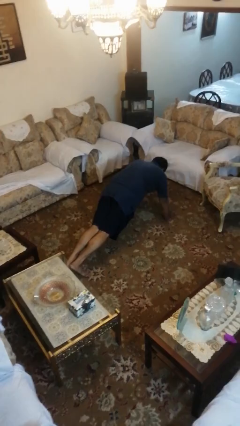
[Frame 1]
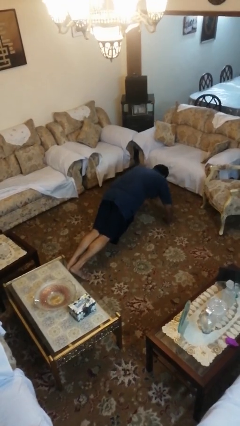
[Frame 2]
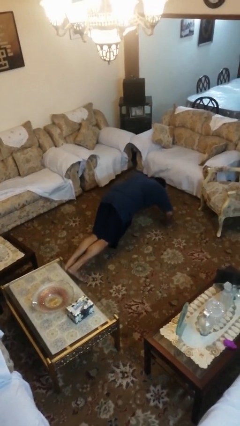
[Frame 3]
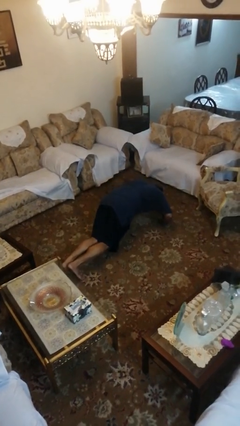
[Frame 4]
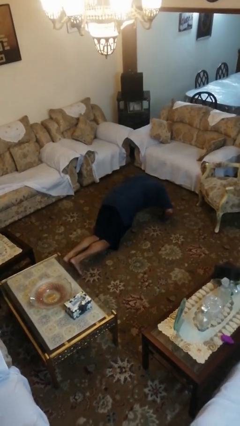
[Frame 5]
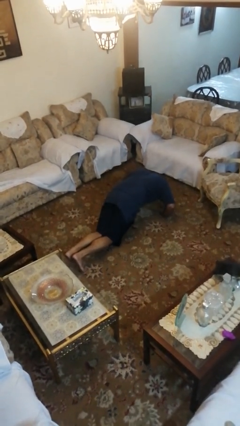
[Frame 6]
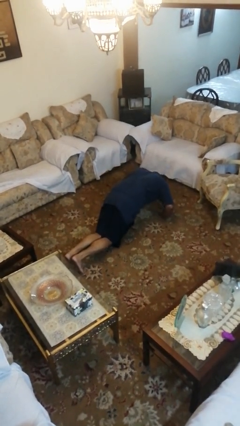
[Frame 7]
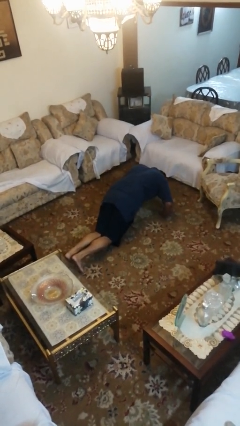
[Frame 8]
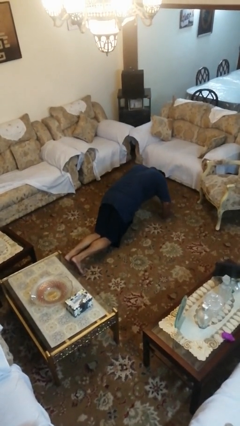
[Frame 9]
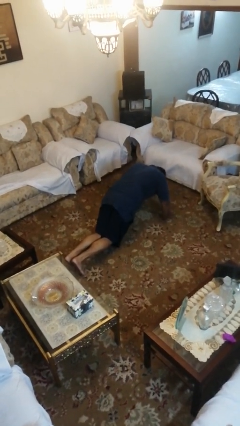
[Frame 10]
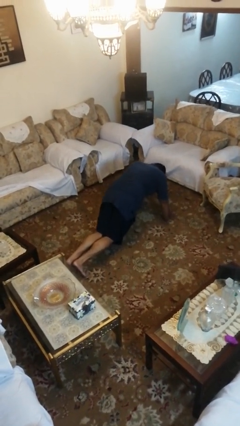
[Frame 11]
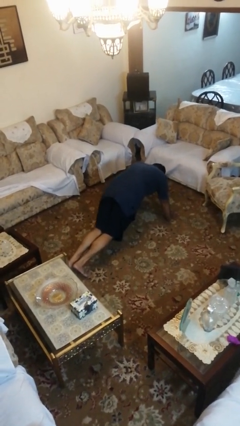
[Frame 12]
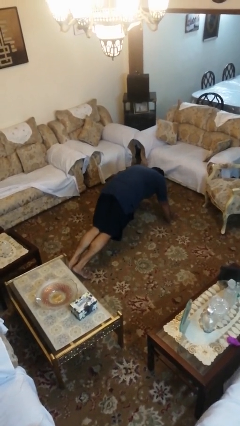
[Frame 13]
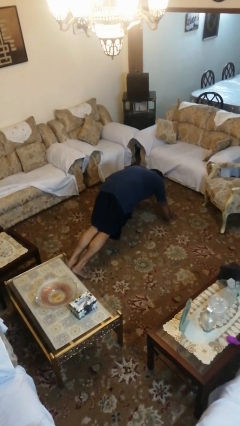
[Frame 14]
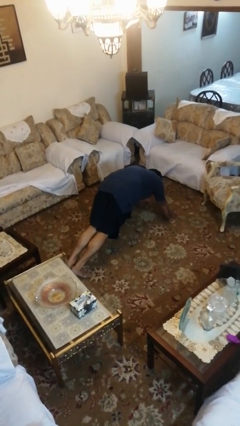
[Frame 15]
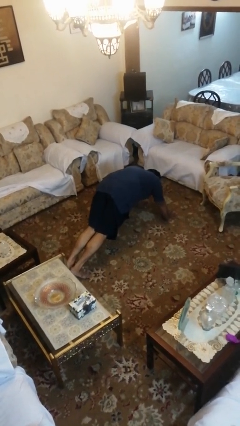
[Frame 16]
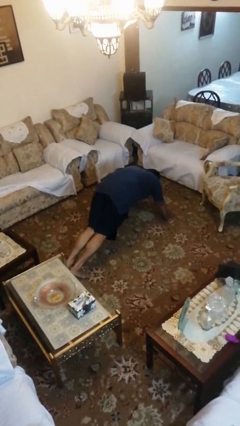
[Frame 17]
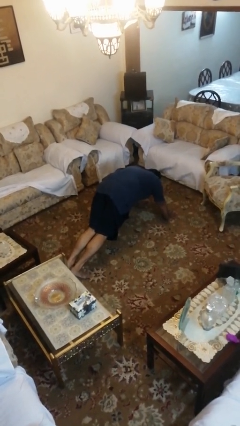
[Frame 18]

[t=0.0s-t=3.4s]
person exercises with pushup

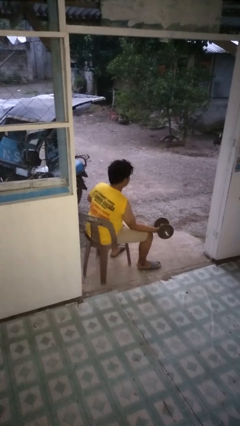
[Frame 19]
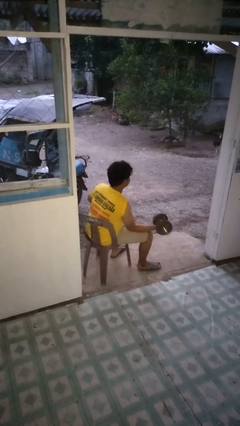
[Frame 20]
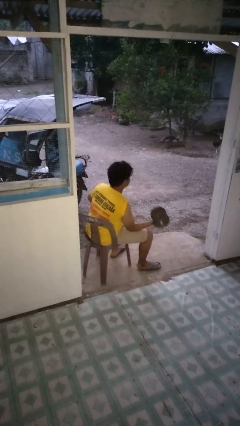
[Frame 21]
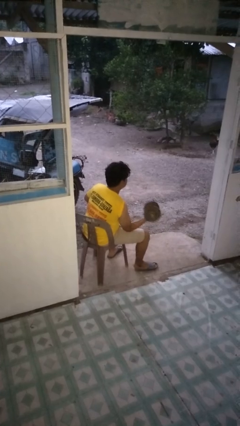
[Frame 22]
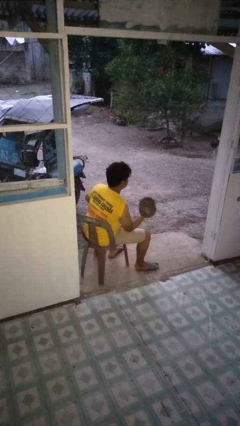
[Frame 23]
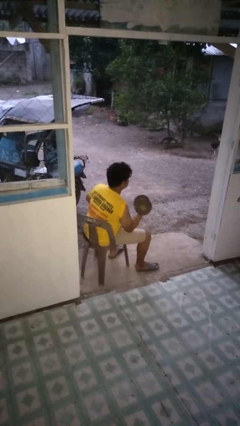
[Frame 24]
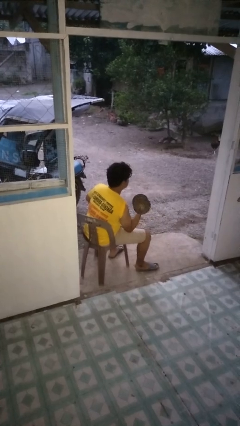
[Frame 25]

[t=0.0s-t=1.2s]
person lifts dumbbells

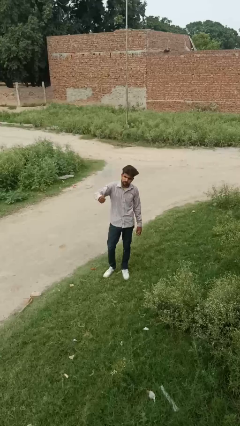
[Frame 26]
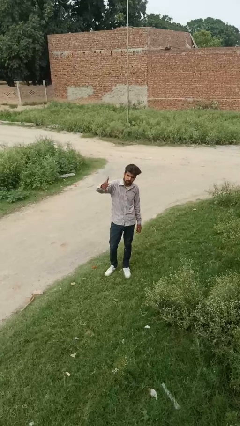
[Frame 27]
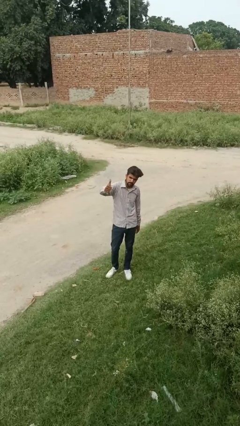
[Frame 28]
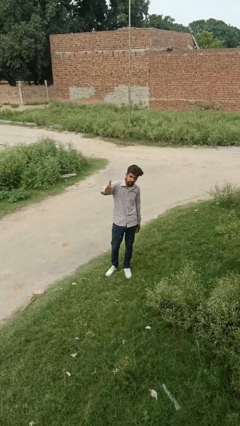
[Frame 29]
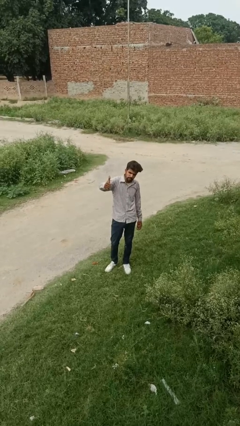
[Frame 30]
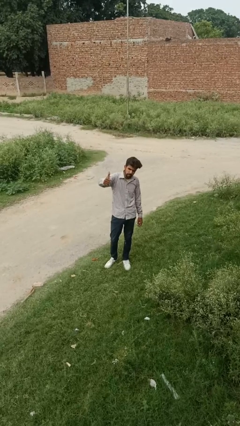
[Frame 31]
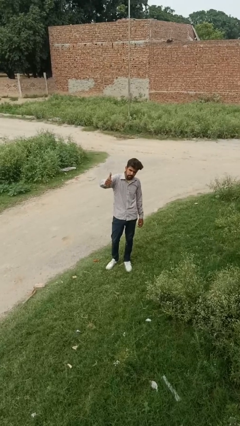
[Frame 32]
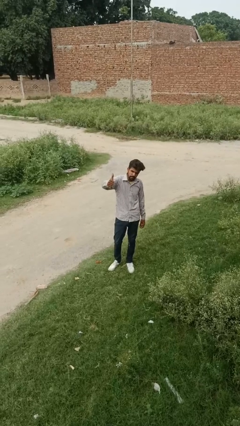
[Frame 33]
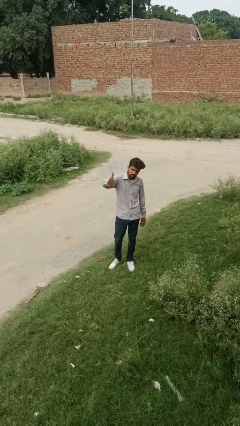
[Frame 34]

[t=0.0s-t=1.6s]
person gestures thumbs up

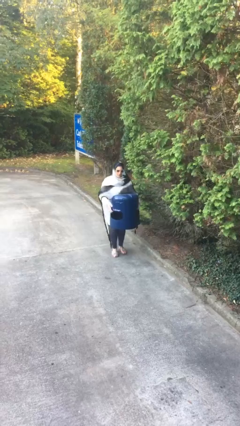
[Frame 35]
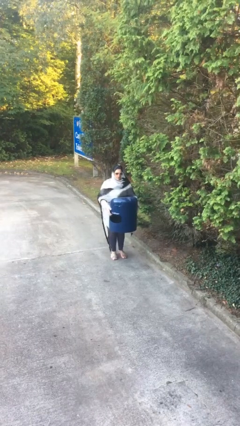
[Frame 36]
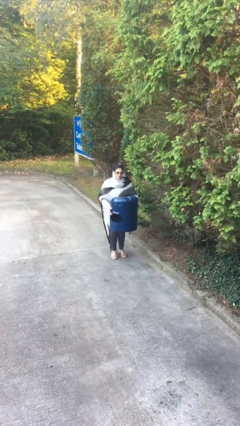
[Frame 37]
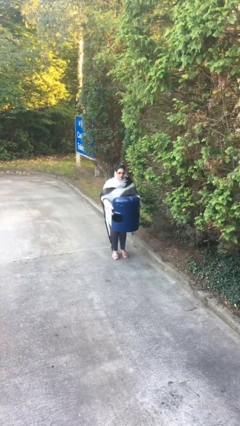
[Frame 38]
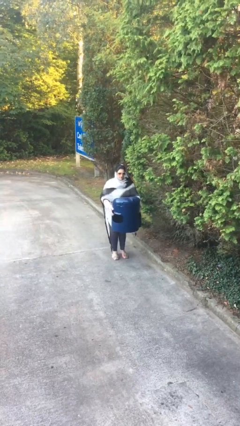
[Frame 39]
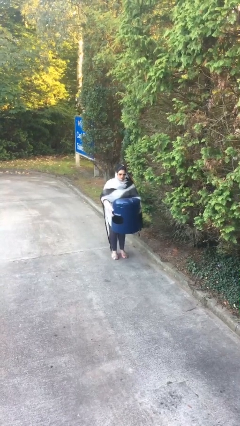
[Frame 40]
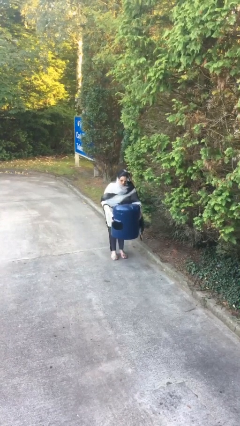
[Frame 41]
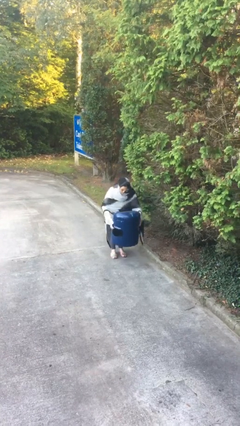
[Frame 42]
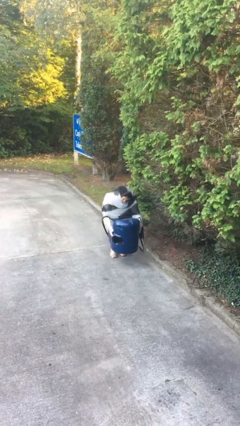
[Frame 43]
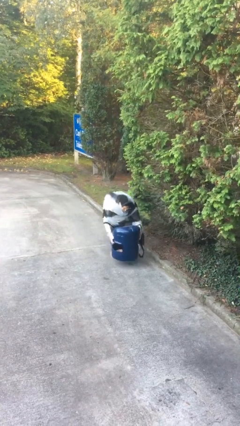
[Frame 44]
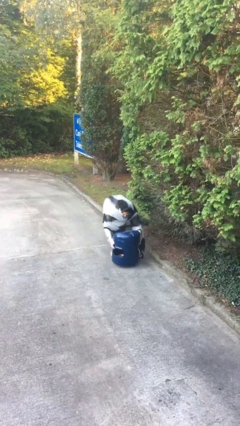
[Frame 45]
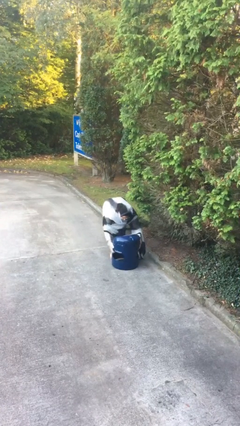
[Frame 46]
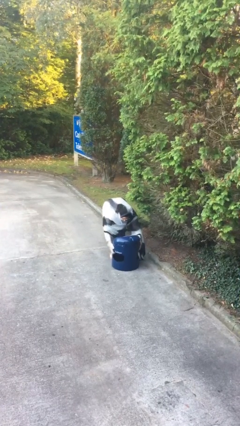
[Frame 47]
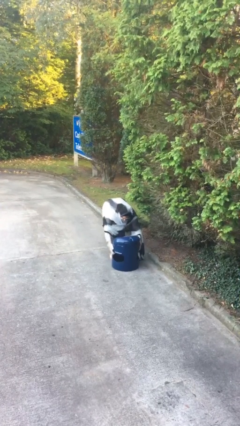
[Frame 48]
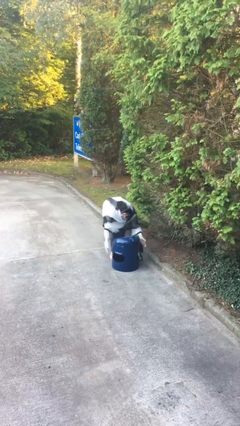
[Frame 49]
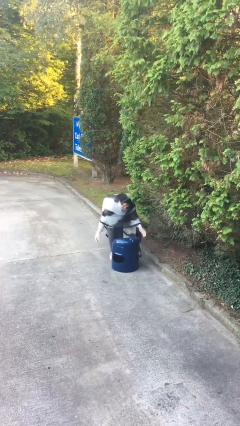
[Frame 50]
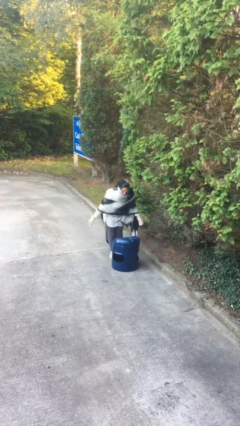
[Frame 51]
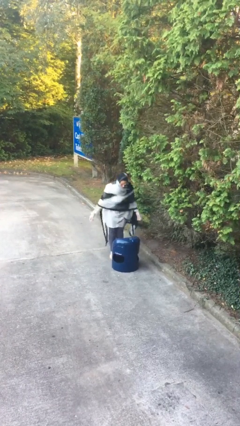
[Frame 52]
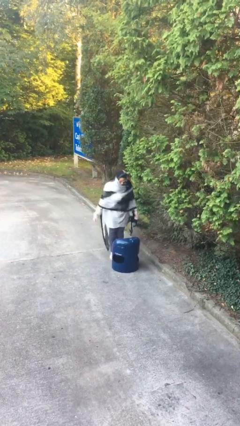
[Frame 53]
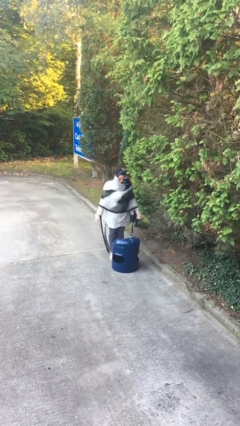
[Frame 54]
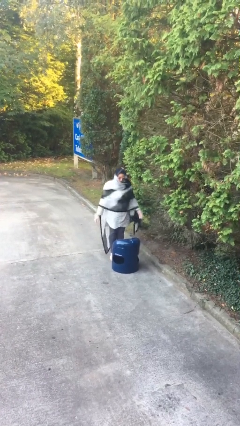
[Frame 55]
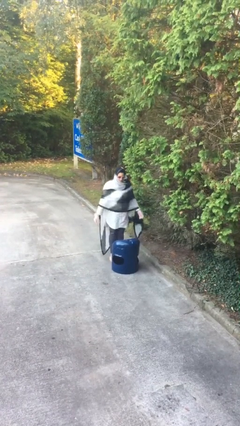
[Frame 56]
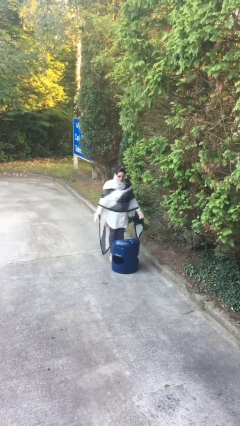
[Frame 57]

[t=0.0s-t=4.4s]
person puts down object on floor

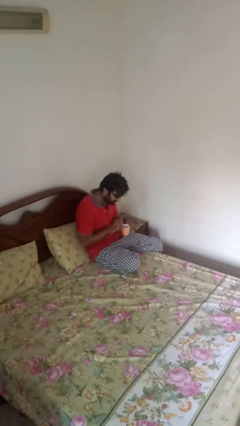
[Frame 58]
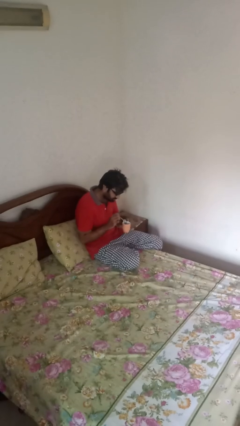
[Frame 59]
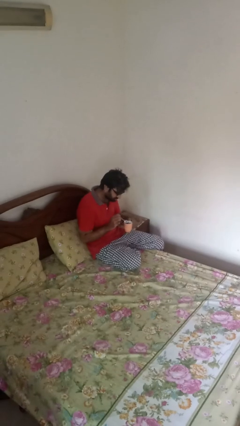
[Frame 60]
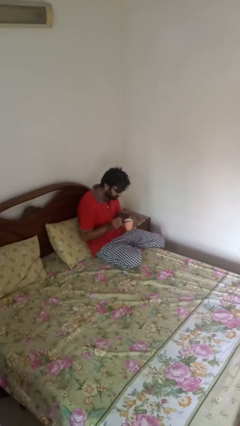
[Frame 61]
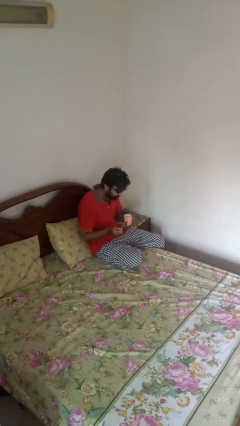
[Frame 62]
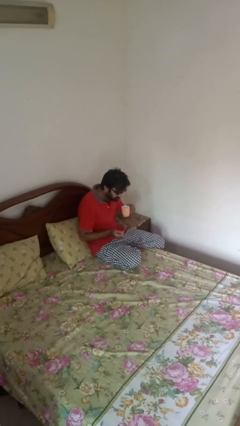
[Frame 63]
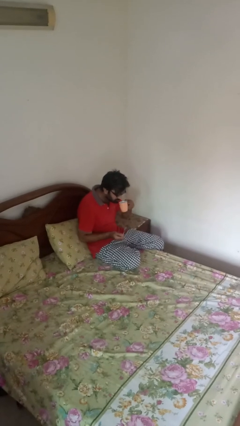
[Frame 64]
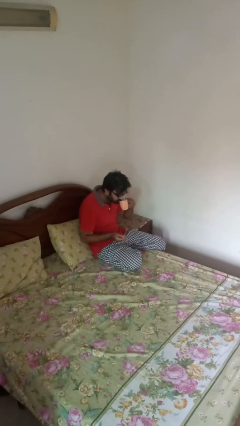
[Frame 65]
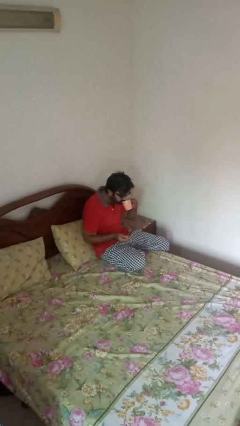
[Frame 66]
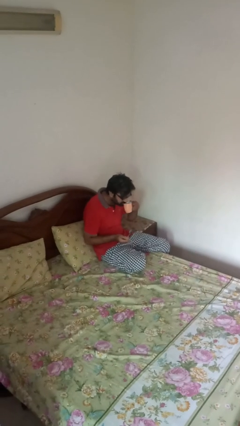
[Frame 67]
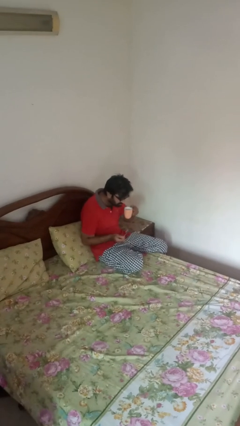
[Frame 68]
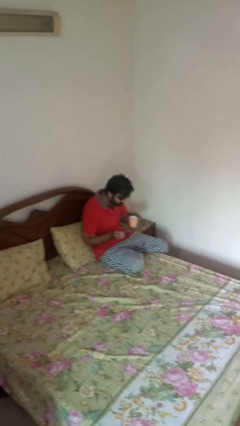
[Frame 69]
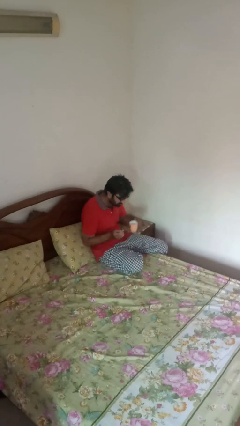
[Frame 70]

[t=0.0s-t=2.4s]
person drinks from mug

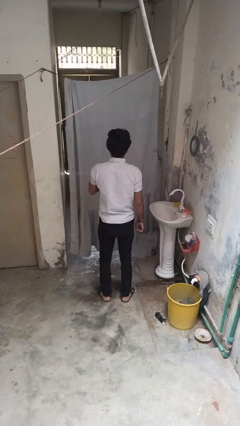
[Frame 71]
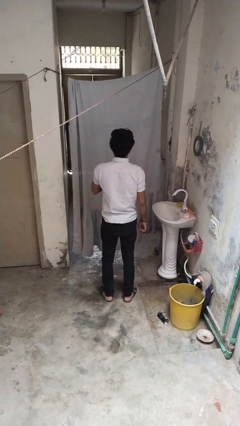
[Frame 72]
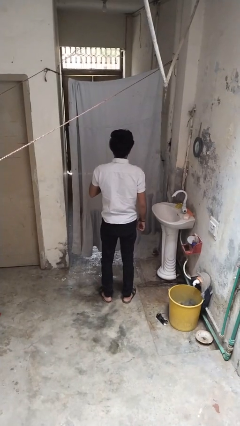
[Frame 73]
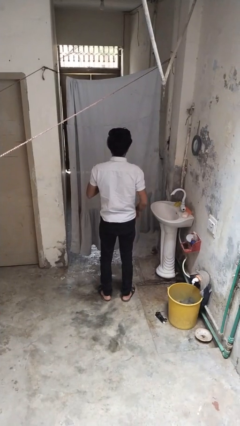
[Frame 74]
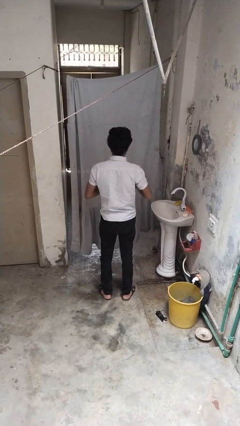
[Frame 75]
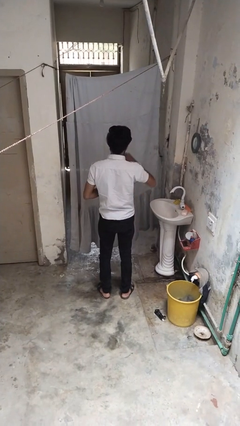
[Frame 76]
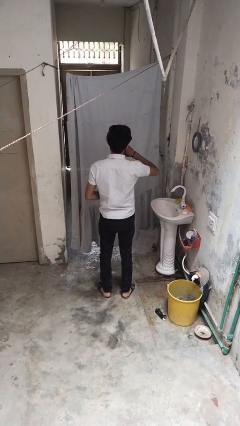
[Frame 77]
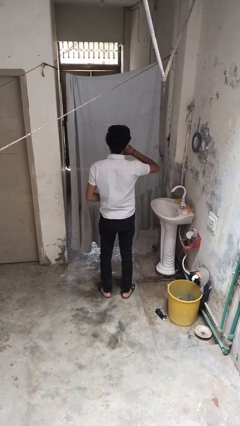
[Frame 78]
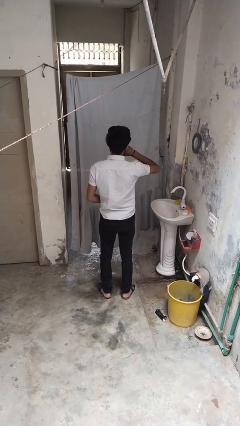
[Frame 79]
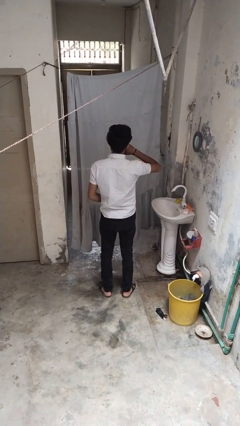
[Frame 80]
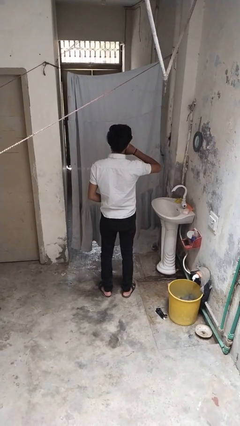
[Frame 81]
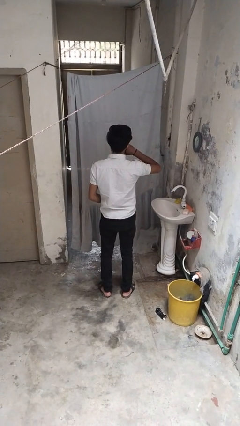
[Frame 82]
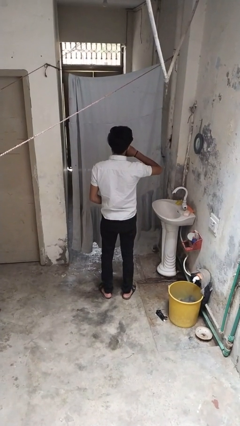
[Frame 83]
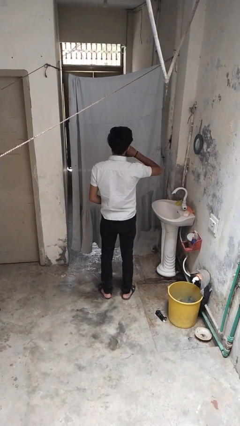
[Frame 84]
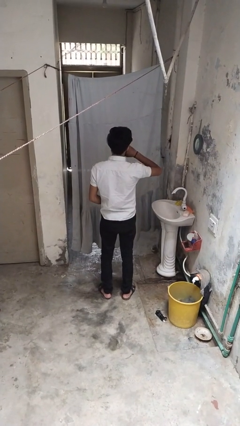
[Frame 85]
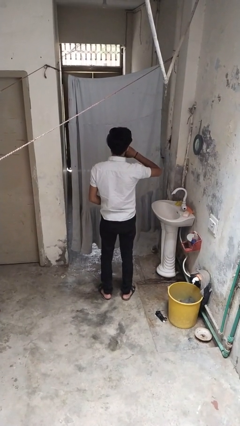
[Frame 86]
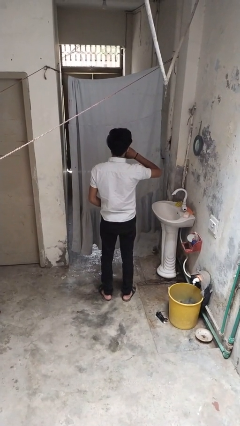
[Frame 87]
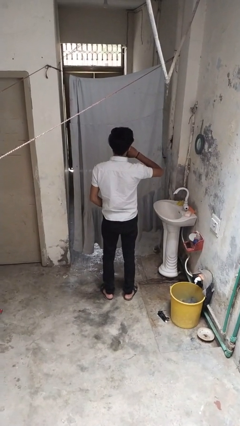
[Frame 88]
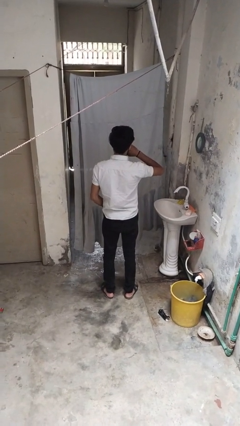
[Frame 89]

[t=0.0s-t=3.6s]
person yawns

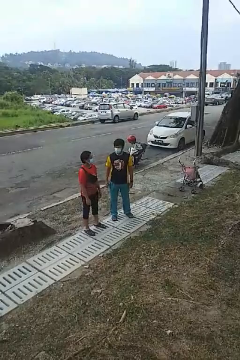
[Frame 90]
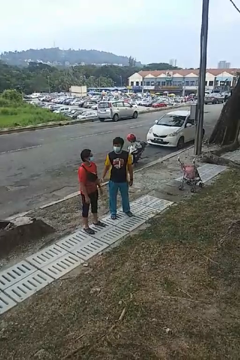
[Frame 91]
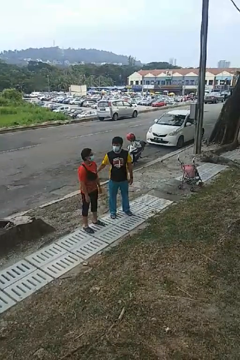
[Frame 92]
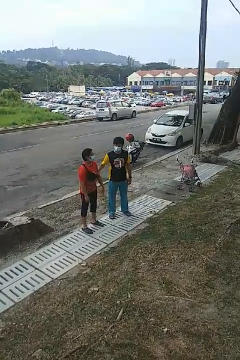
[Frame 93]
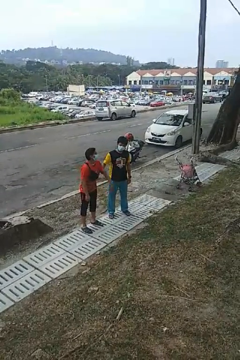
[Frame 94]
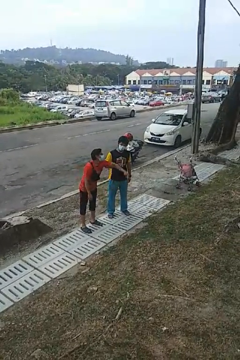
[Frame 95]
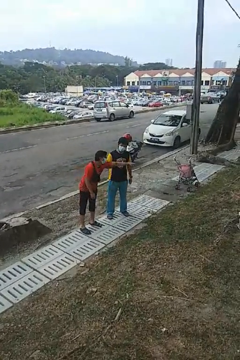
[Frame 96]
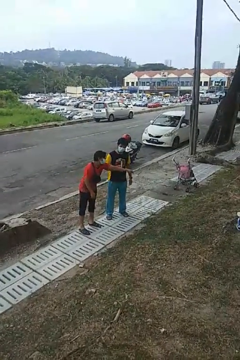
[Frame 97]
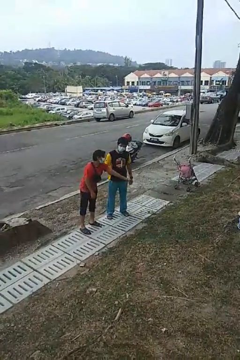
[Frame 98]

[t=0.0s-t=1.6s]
person grabs person by bicep
